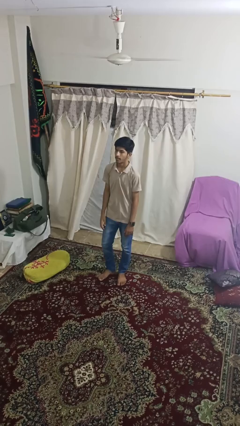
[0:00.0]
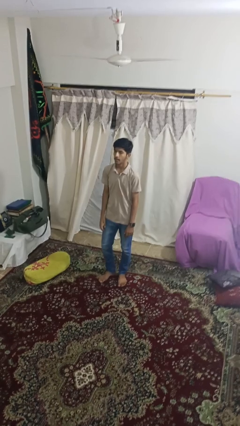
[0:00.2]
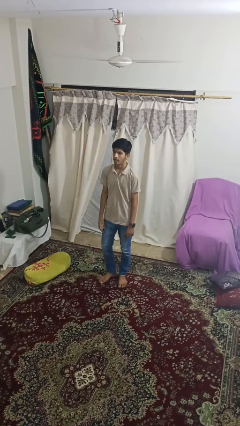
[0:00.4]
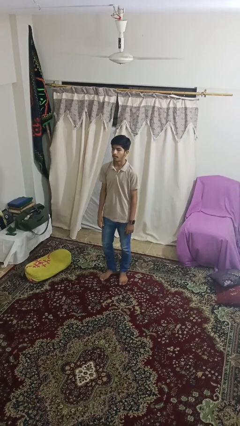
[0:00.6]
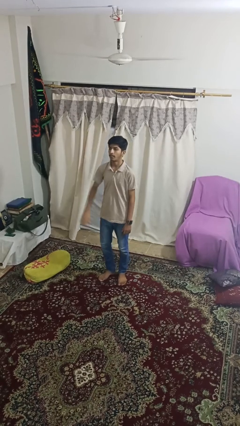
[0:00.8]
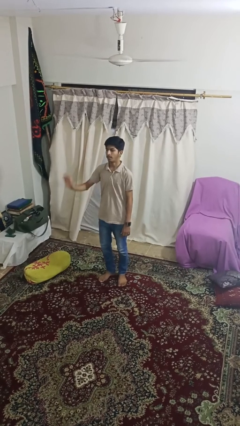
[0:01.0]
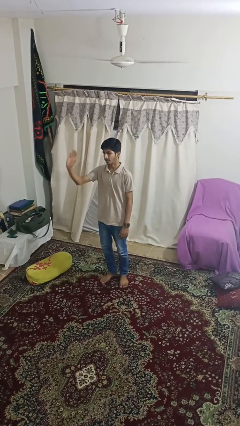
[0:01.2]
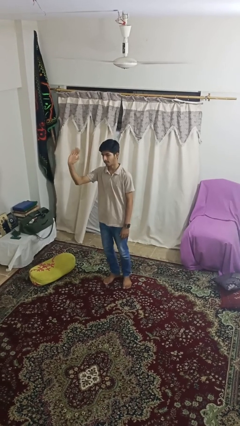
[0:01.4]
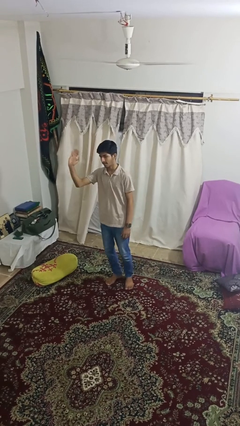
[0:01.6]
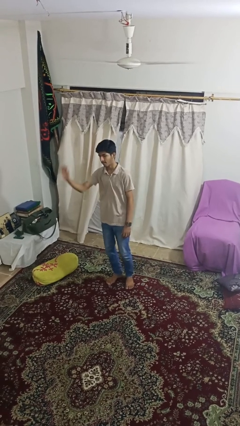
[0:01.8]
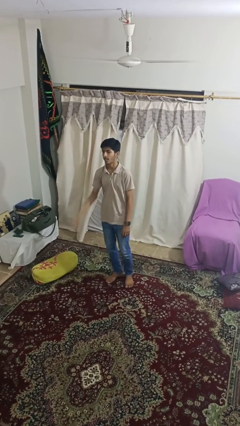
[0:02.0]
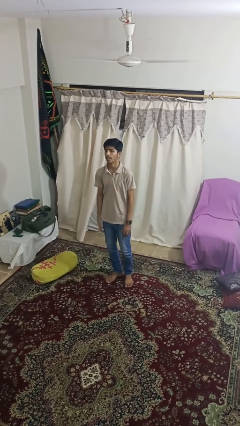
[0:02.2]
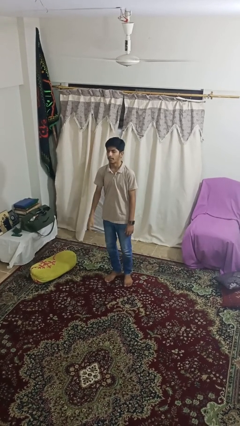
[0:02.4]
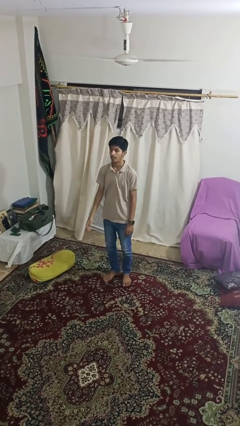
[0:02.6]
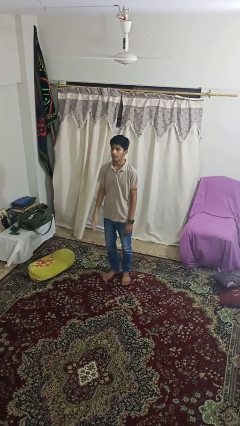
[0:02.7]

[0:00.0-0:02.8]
person waves at person

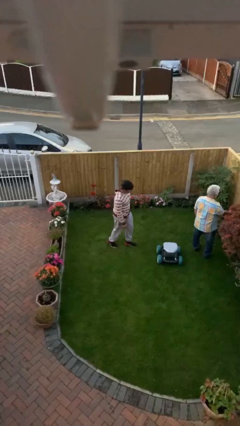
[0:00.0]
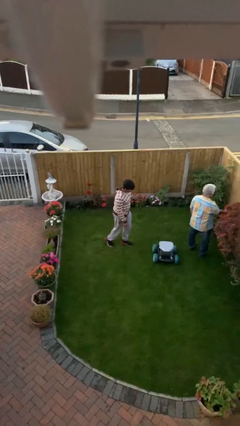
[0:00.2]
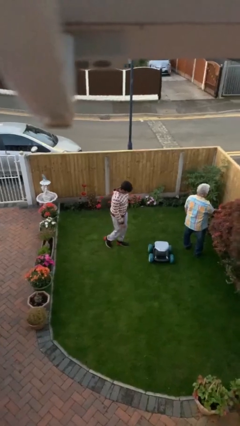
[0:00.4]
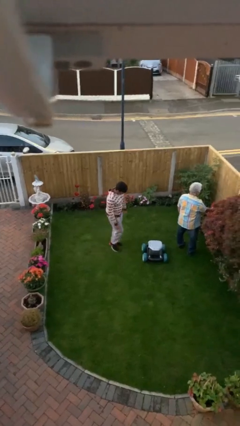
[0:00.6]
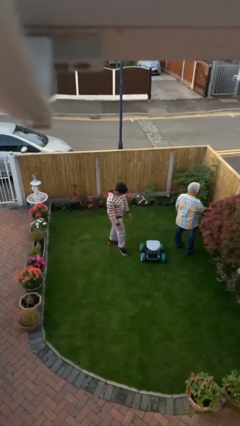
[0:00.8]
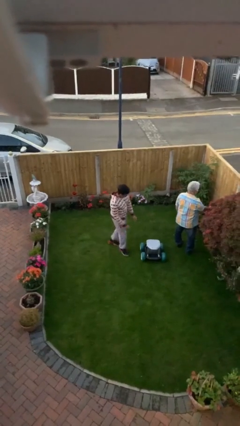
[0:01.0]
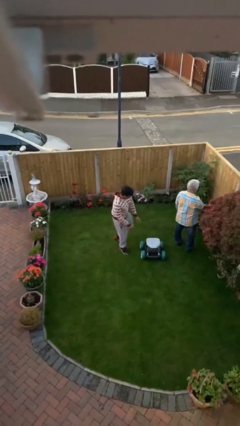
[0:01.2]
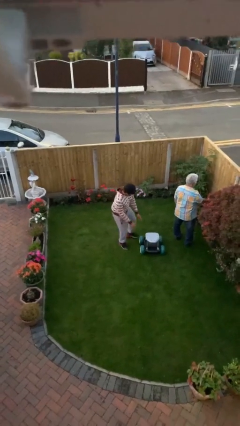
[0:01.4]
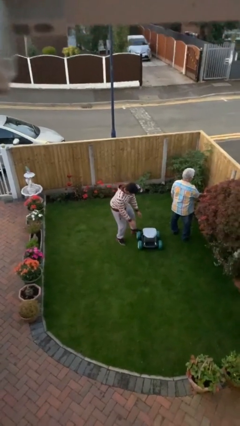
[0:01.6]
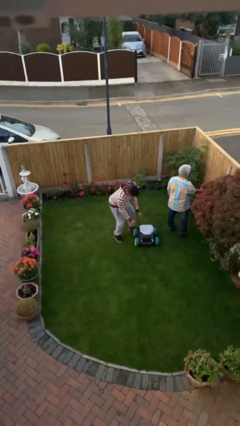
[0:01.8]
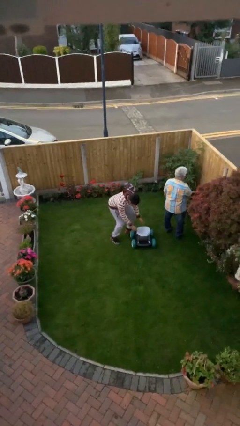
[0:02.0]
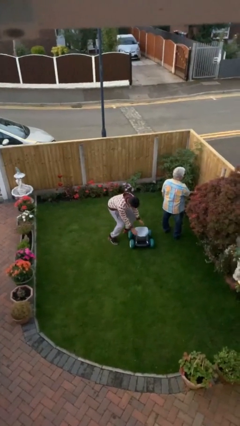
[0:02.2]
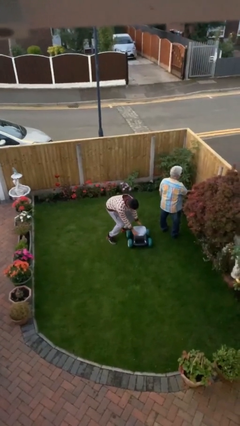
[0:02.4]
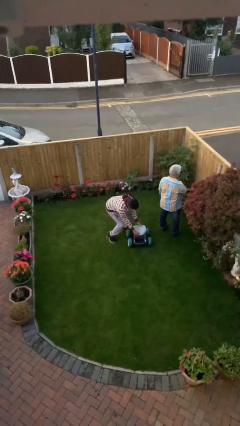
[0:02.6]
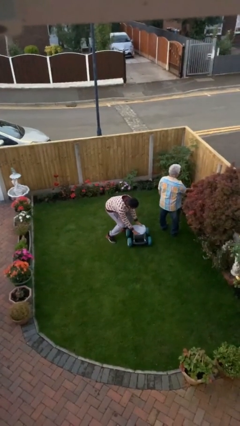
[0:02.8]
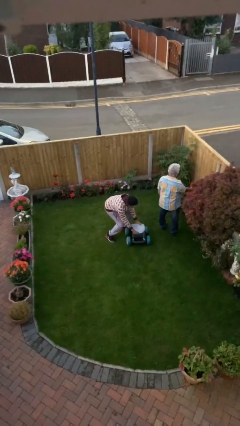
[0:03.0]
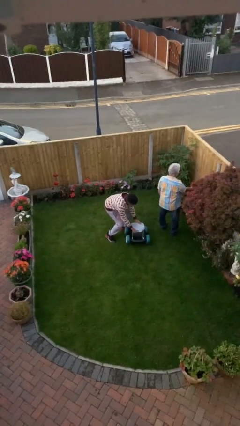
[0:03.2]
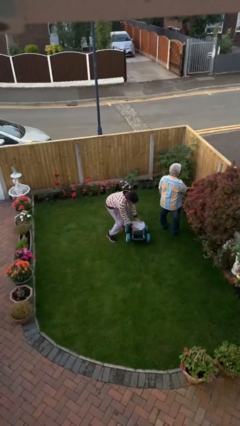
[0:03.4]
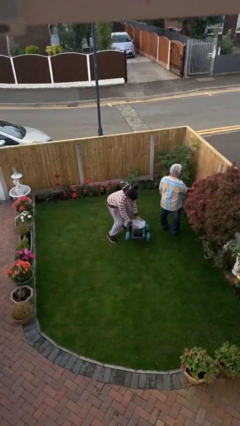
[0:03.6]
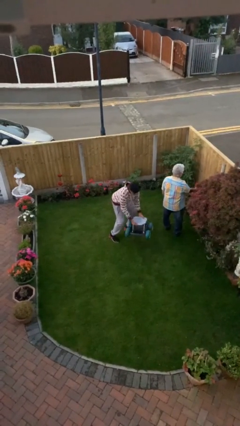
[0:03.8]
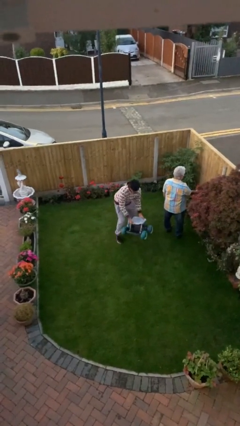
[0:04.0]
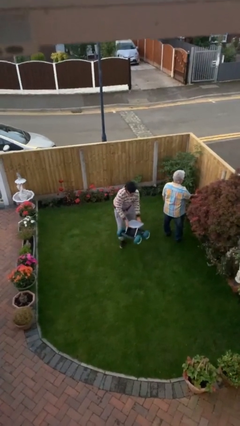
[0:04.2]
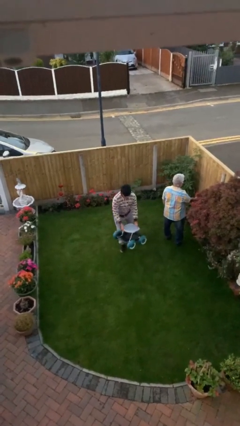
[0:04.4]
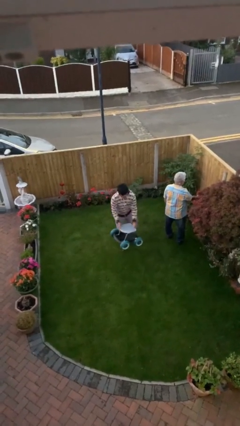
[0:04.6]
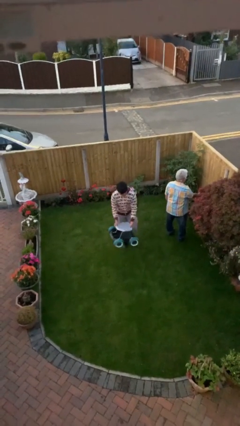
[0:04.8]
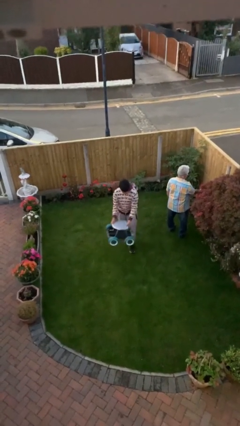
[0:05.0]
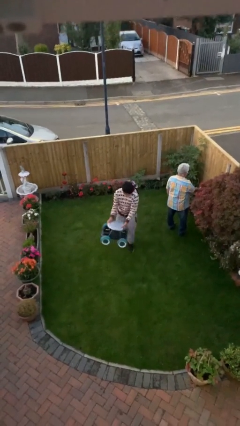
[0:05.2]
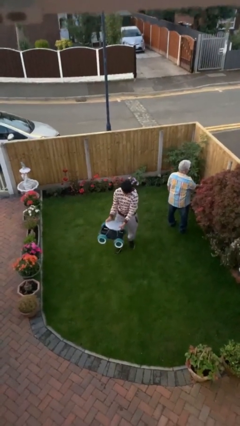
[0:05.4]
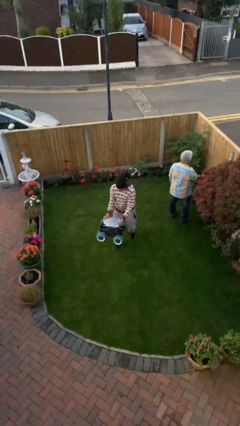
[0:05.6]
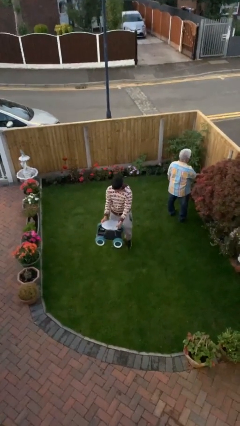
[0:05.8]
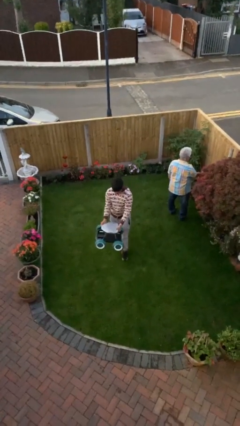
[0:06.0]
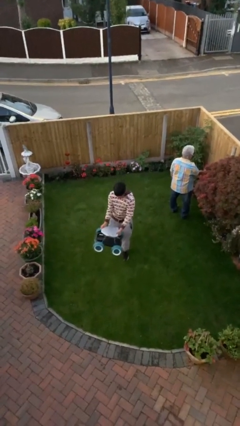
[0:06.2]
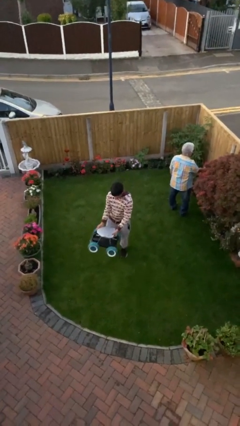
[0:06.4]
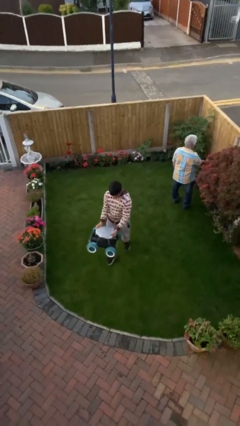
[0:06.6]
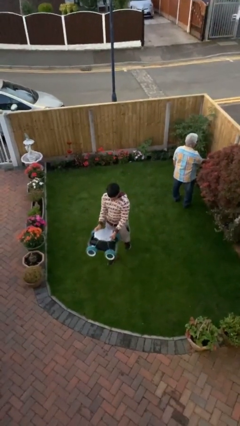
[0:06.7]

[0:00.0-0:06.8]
person steals object from person

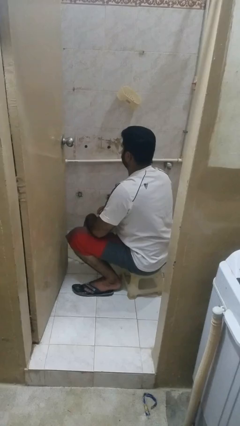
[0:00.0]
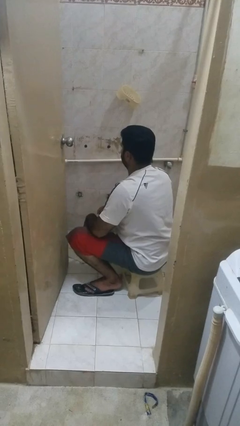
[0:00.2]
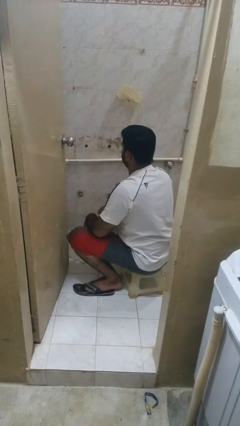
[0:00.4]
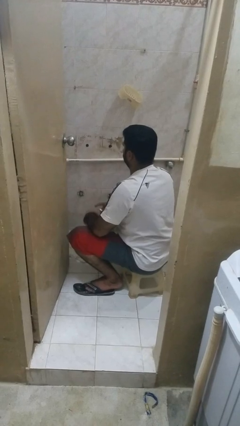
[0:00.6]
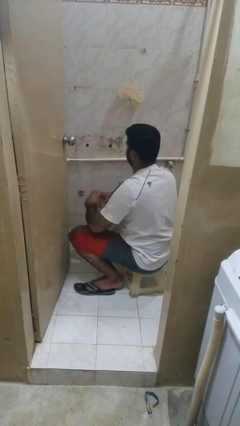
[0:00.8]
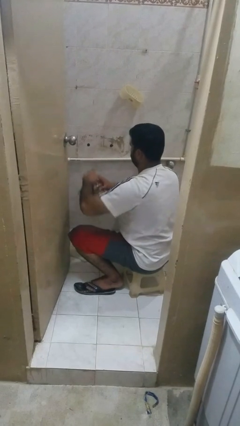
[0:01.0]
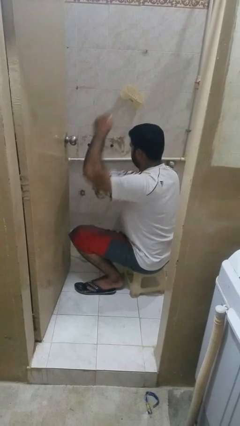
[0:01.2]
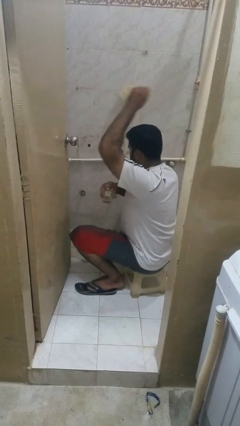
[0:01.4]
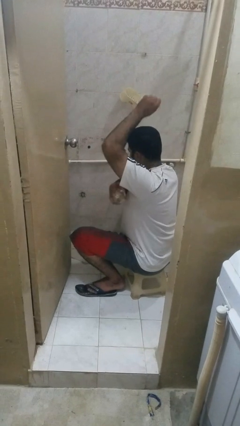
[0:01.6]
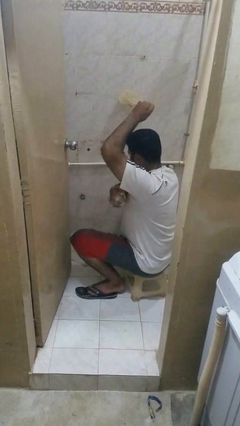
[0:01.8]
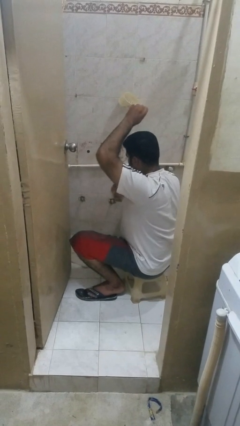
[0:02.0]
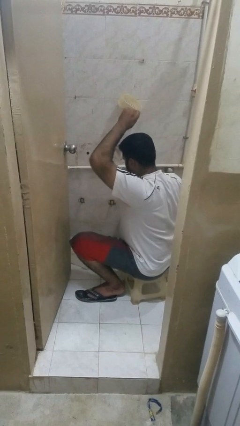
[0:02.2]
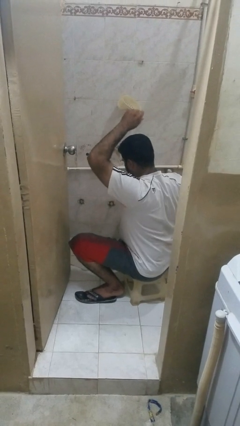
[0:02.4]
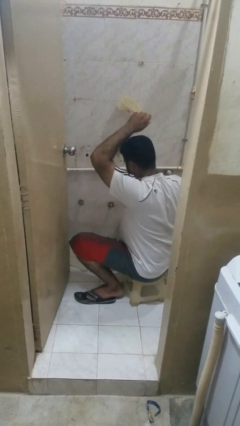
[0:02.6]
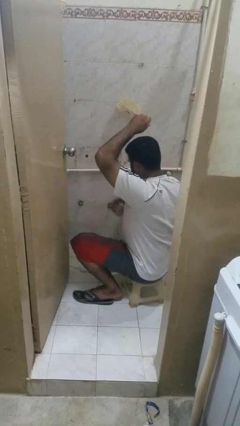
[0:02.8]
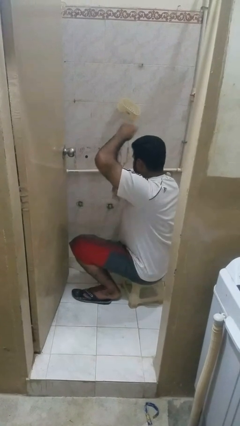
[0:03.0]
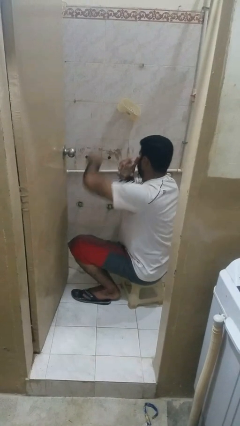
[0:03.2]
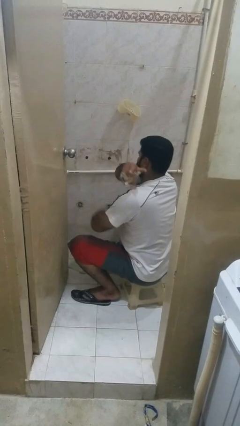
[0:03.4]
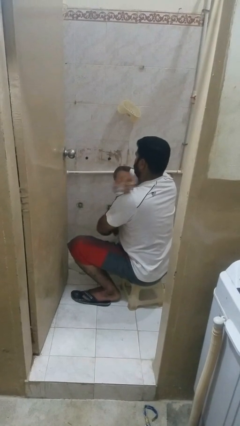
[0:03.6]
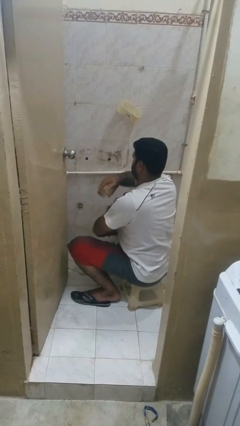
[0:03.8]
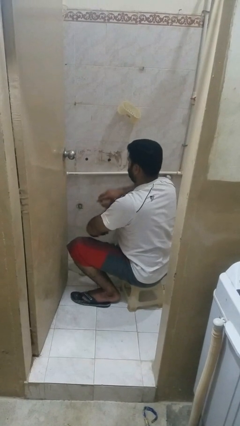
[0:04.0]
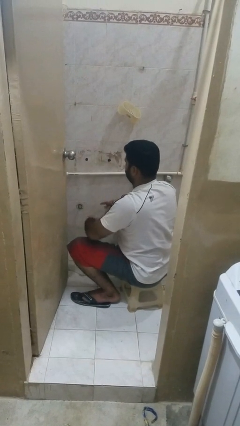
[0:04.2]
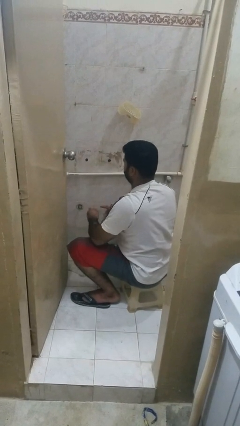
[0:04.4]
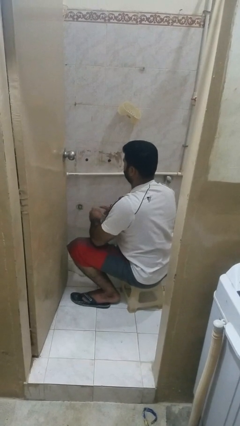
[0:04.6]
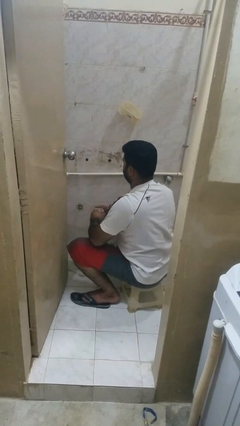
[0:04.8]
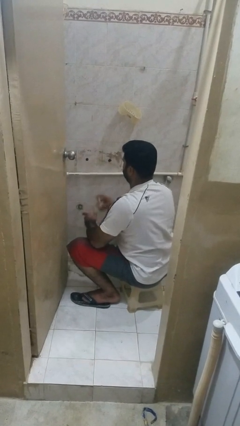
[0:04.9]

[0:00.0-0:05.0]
person applies deodorant

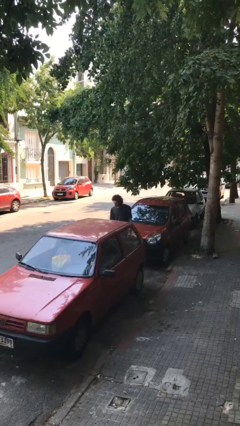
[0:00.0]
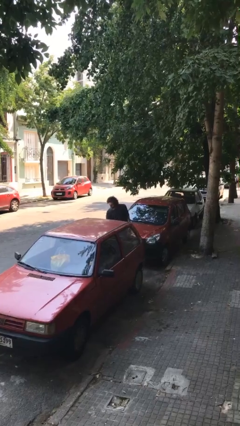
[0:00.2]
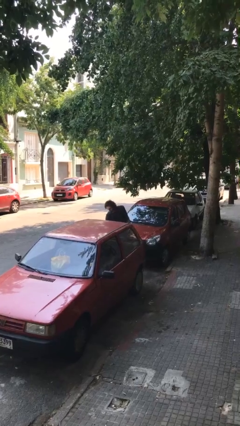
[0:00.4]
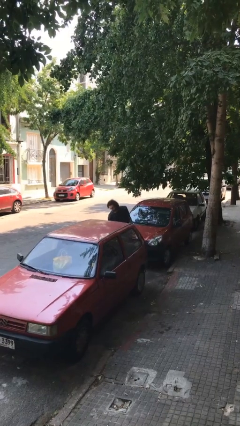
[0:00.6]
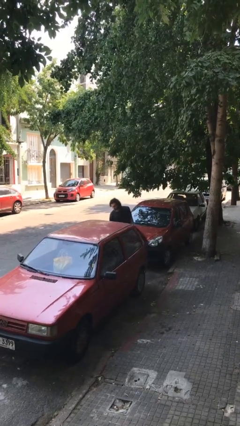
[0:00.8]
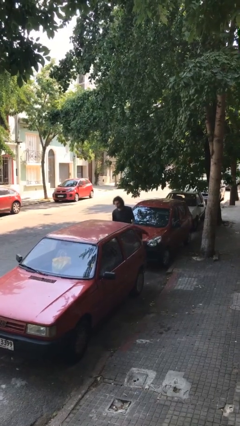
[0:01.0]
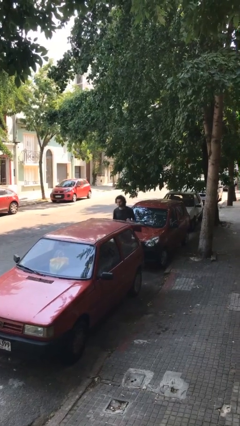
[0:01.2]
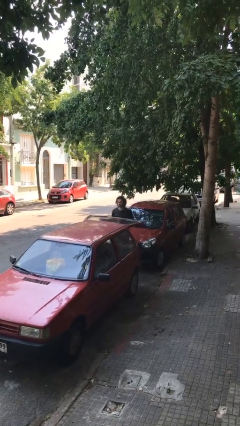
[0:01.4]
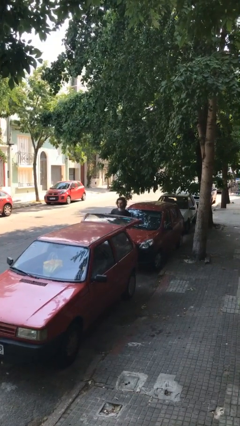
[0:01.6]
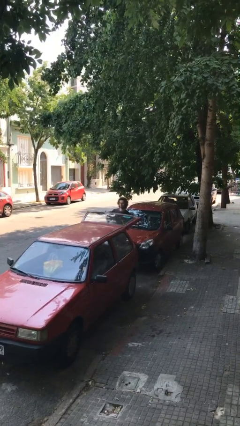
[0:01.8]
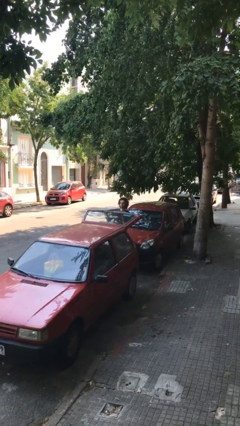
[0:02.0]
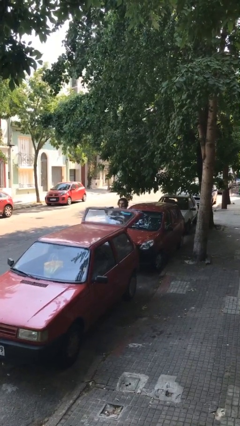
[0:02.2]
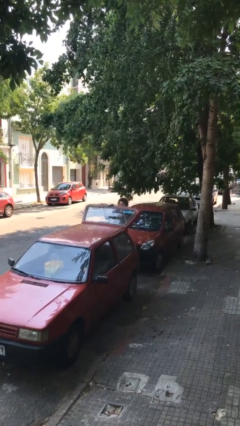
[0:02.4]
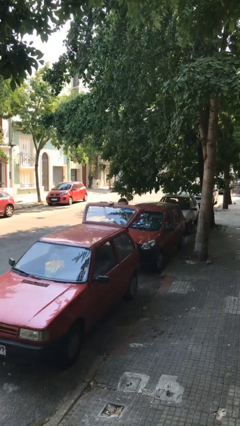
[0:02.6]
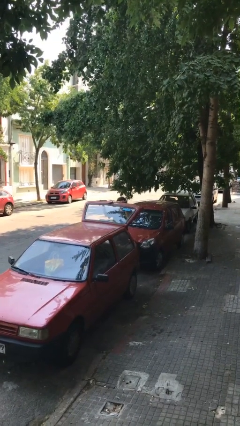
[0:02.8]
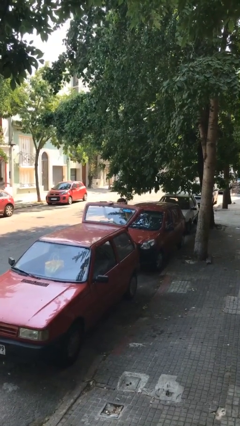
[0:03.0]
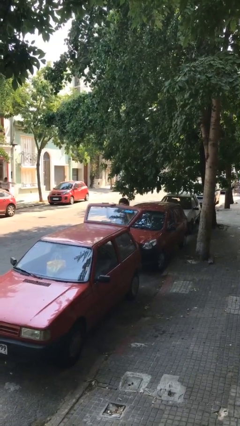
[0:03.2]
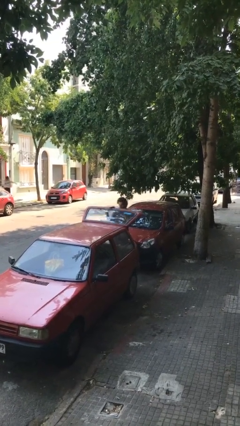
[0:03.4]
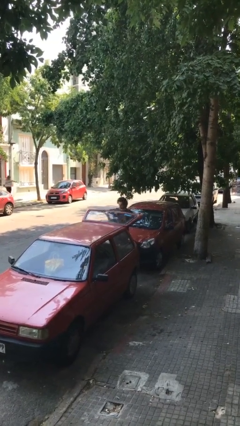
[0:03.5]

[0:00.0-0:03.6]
person opens car trunk
